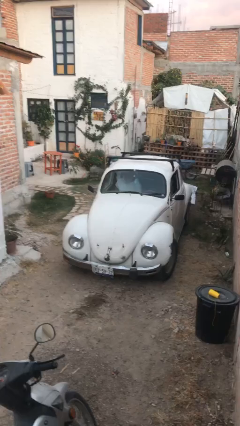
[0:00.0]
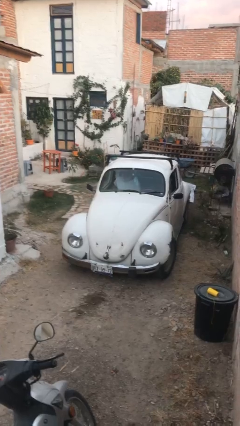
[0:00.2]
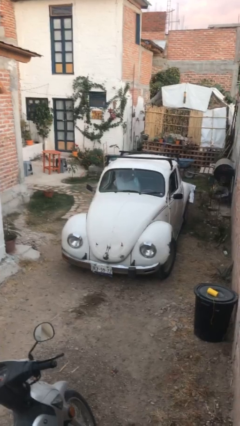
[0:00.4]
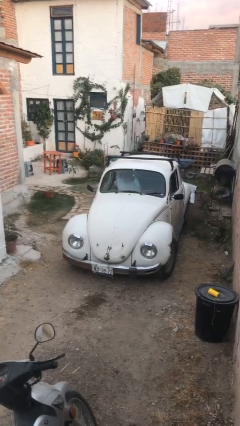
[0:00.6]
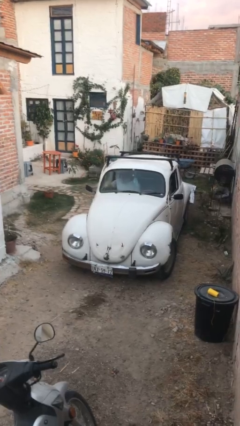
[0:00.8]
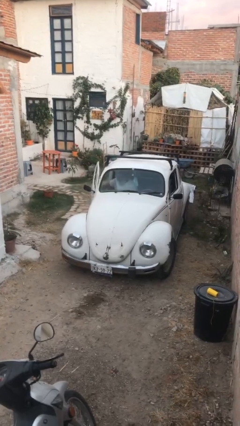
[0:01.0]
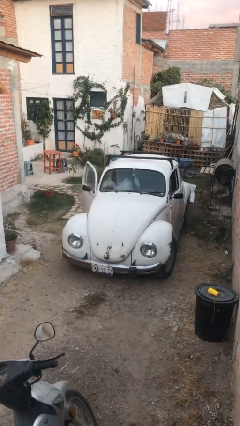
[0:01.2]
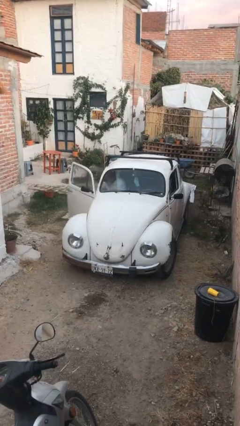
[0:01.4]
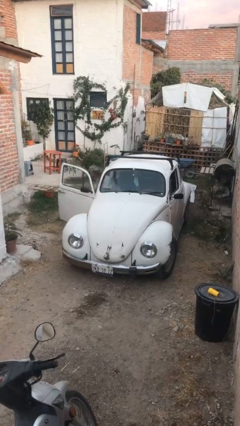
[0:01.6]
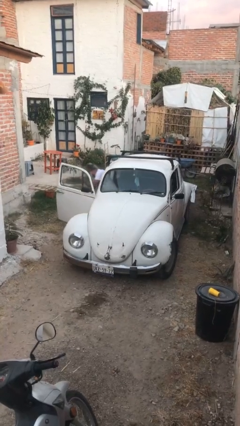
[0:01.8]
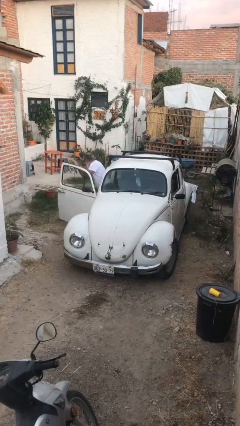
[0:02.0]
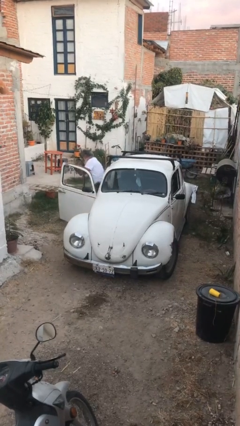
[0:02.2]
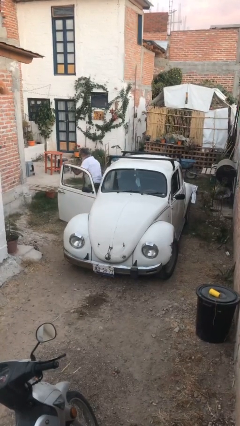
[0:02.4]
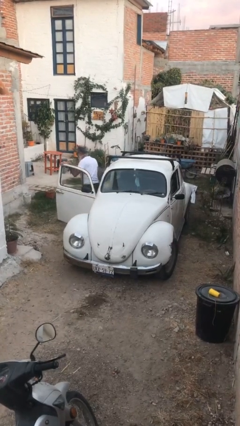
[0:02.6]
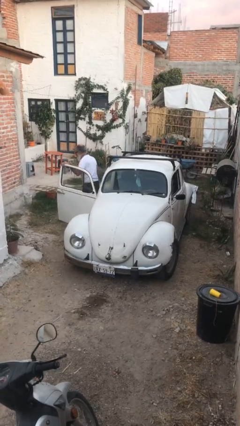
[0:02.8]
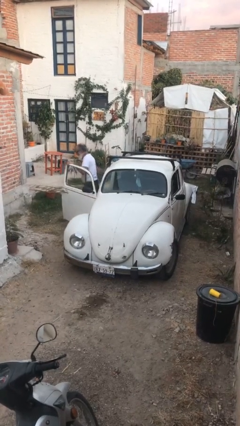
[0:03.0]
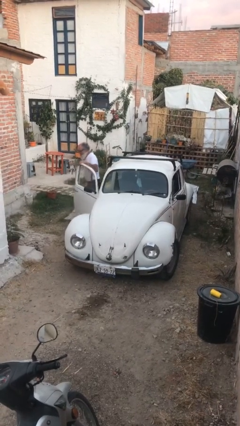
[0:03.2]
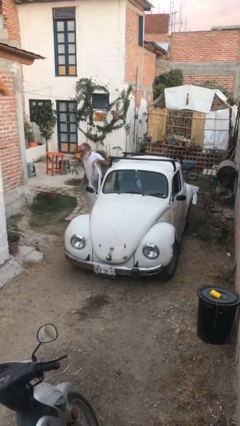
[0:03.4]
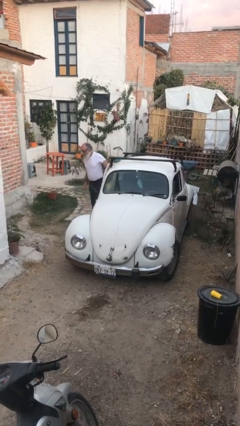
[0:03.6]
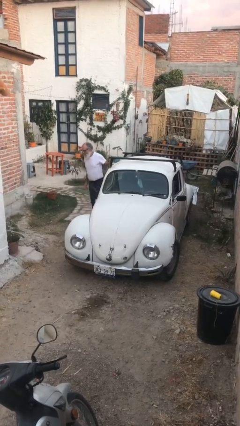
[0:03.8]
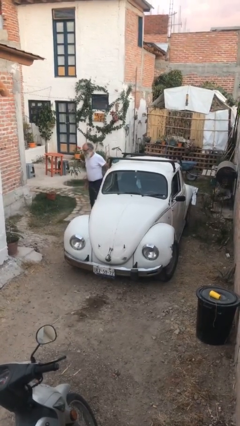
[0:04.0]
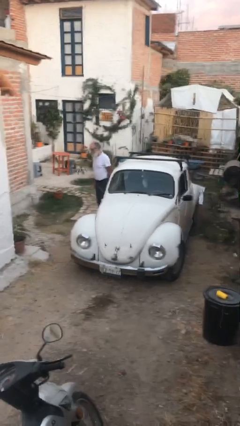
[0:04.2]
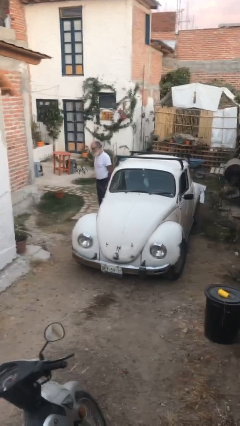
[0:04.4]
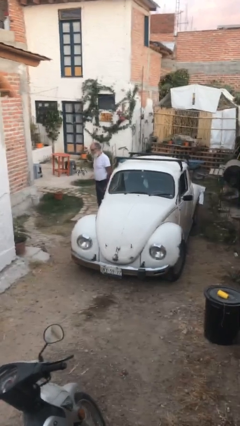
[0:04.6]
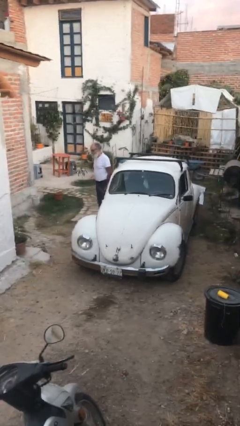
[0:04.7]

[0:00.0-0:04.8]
car drops off person

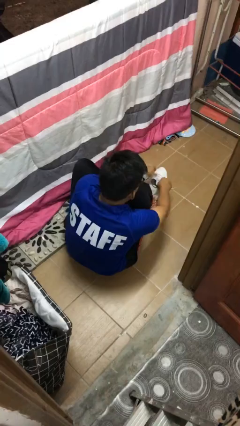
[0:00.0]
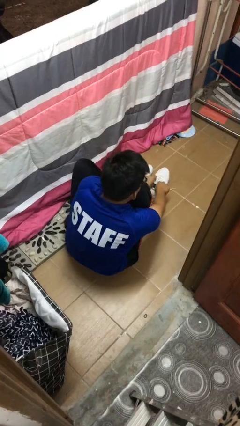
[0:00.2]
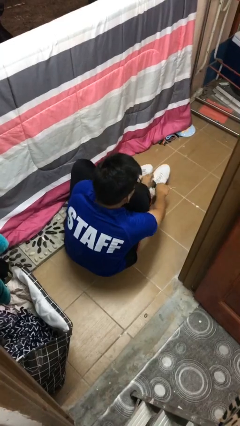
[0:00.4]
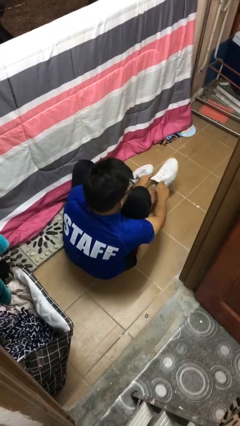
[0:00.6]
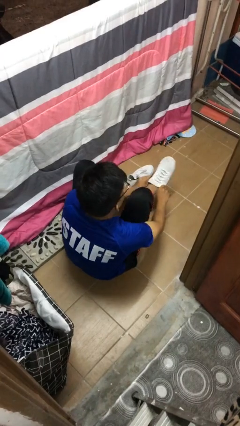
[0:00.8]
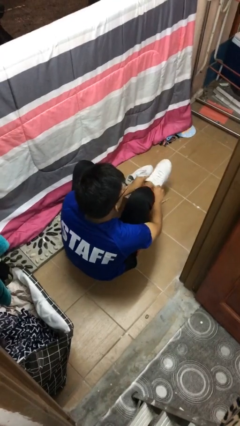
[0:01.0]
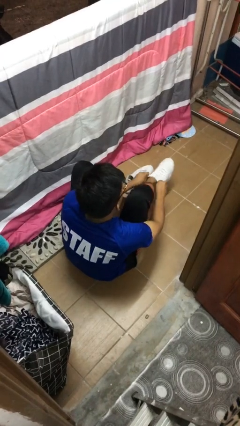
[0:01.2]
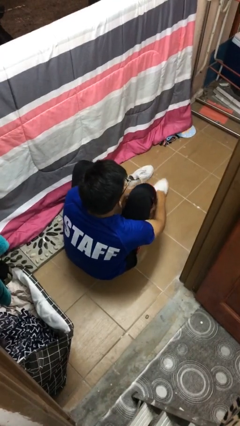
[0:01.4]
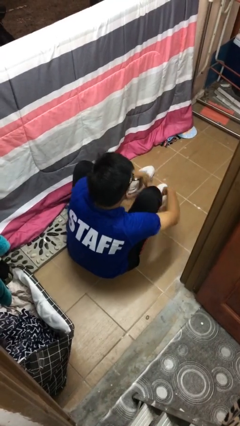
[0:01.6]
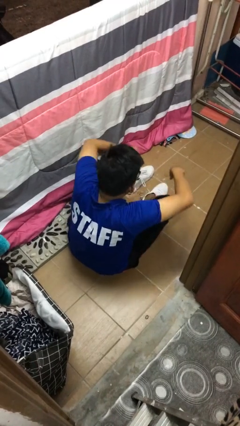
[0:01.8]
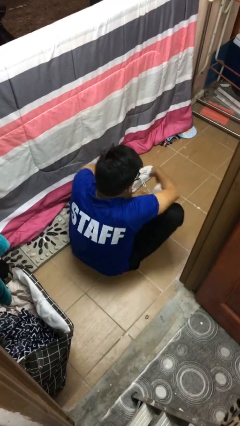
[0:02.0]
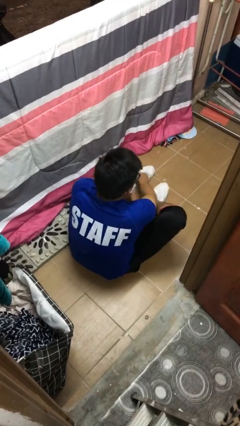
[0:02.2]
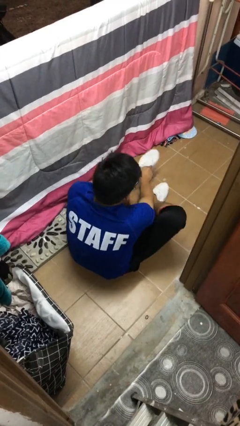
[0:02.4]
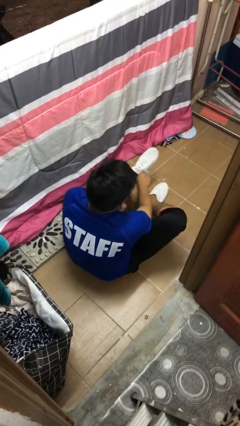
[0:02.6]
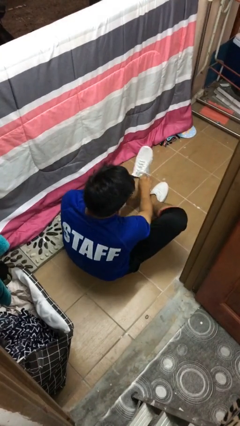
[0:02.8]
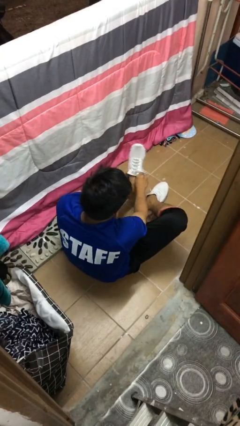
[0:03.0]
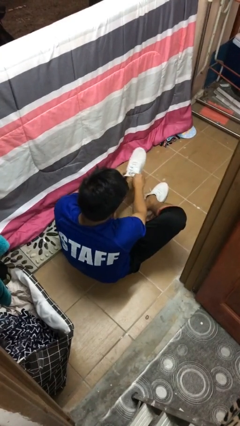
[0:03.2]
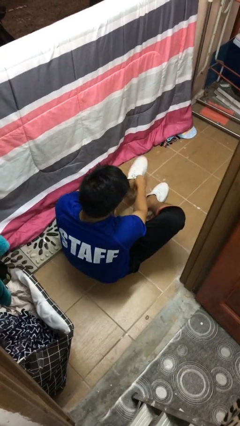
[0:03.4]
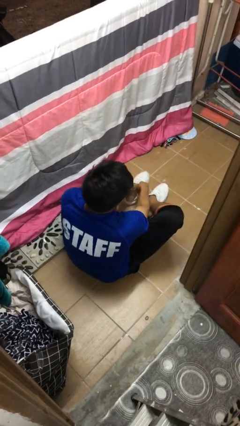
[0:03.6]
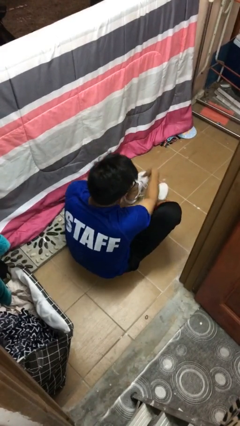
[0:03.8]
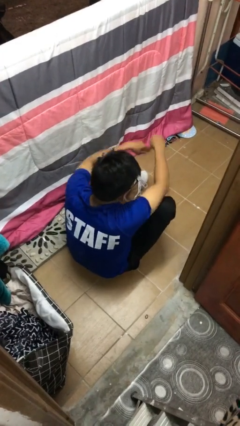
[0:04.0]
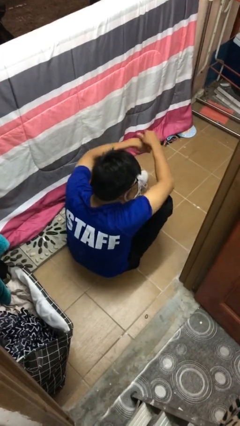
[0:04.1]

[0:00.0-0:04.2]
person puts on shoes

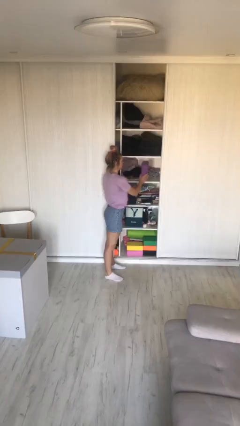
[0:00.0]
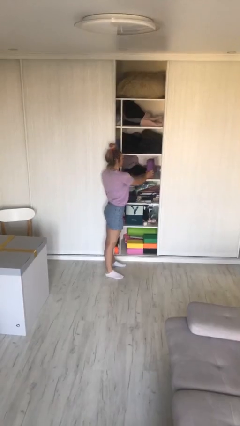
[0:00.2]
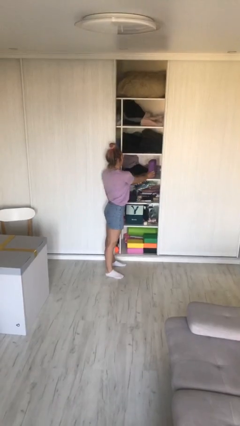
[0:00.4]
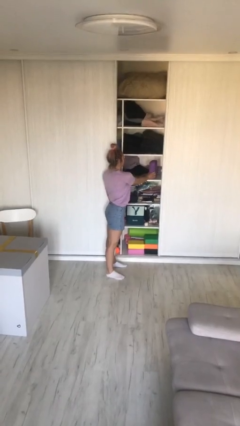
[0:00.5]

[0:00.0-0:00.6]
person puts down object into cabinet

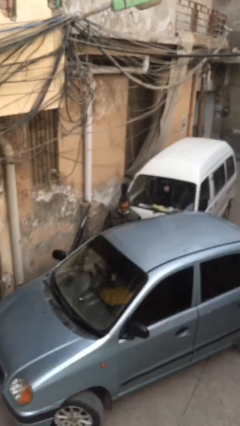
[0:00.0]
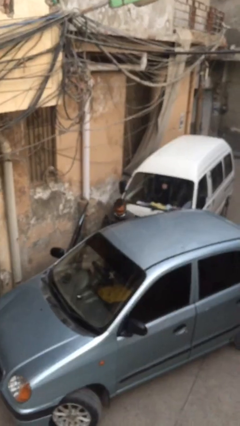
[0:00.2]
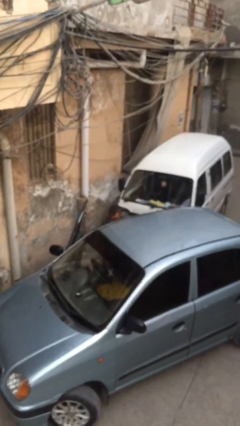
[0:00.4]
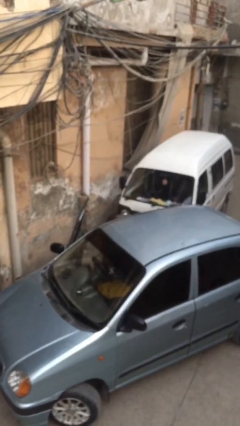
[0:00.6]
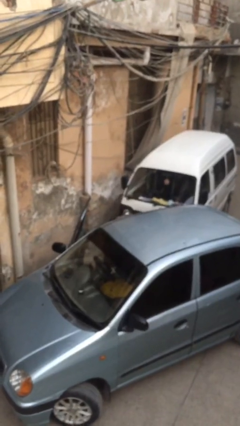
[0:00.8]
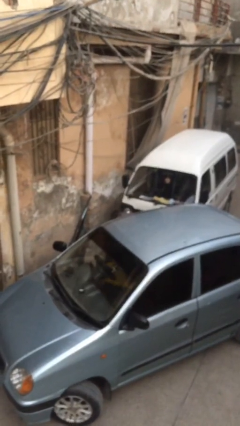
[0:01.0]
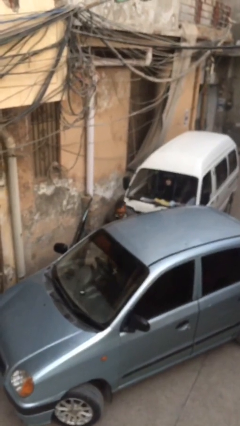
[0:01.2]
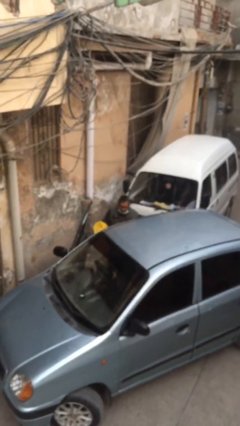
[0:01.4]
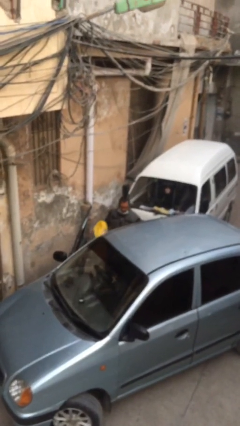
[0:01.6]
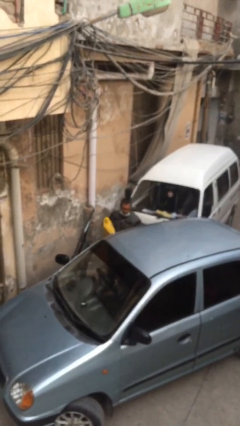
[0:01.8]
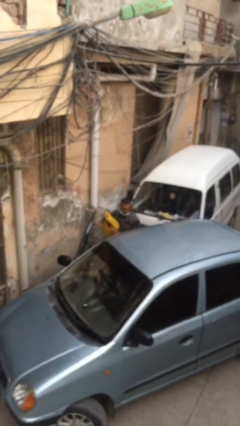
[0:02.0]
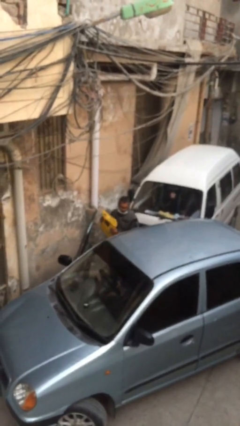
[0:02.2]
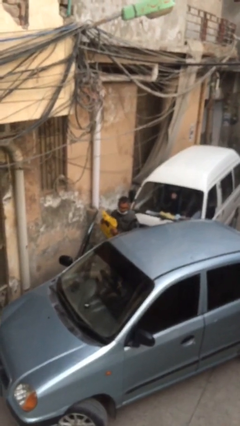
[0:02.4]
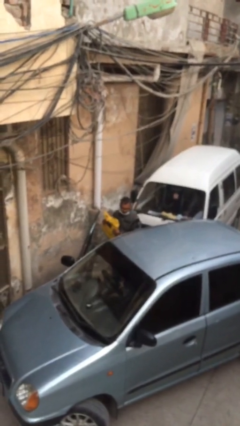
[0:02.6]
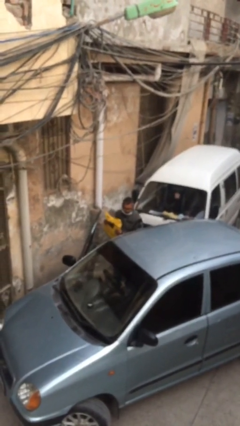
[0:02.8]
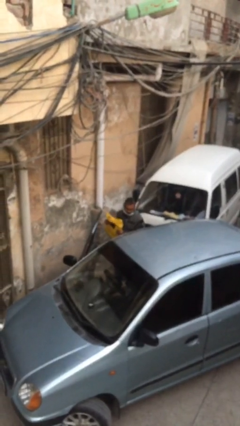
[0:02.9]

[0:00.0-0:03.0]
person unloads car

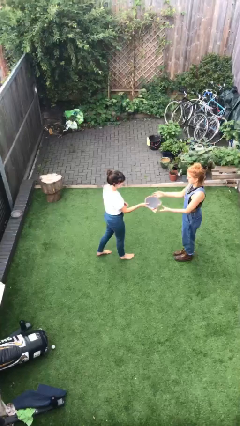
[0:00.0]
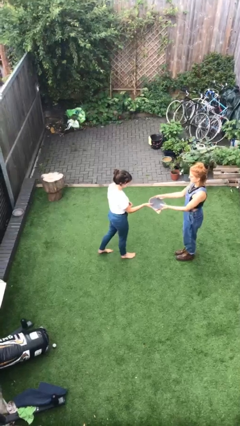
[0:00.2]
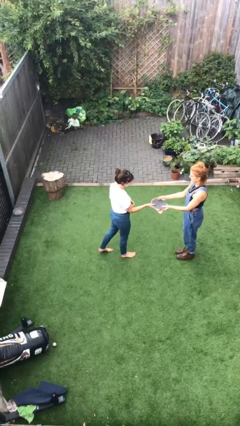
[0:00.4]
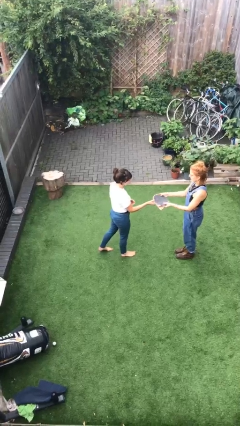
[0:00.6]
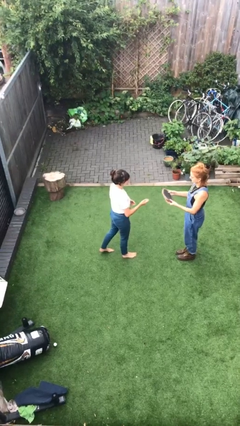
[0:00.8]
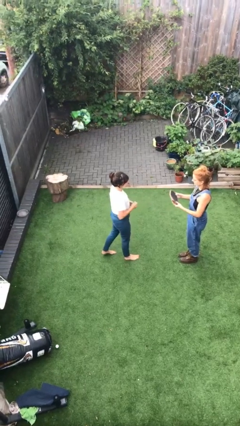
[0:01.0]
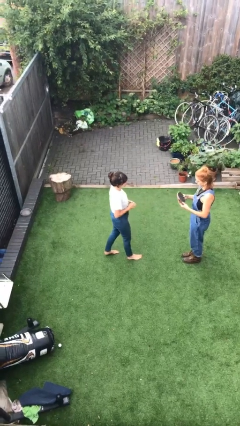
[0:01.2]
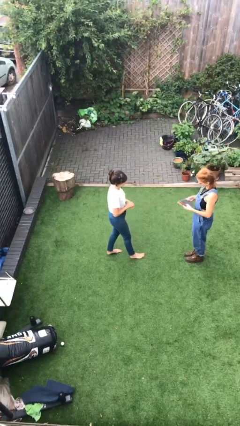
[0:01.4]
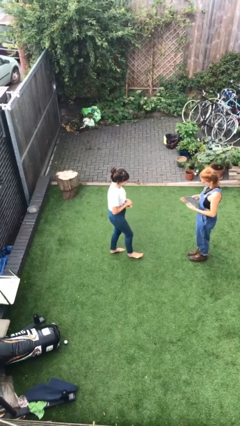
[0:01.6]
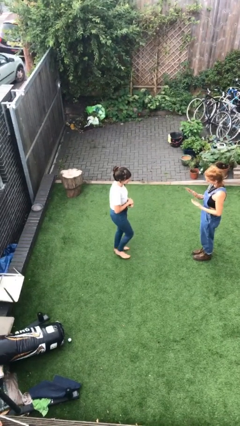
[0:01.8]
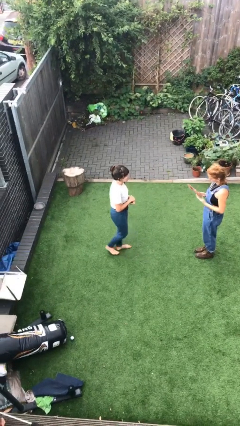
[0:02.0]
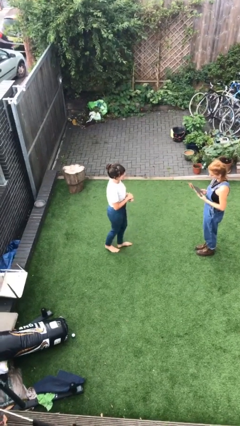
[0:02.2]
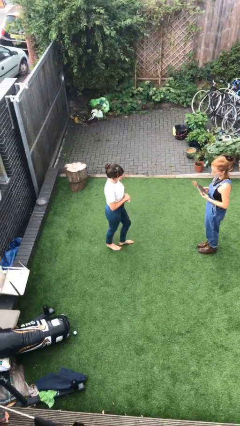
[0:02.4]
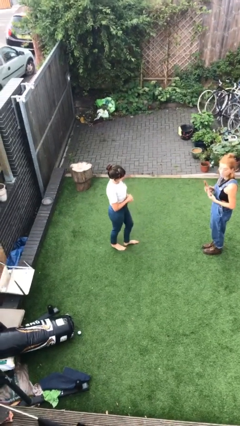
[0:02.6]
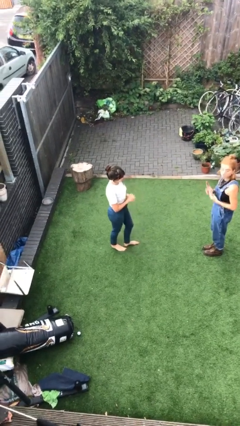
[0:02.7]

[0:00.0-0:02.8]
person transfers object to person

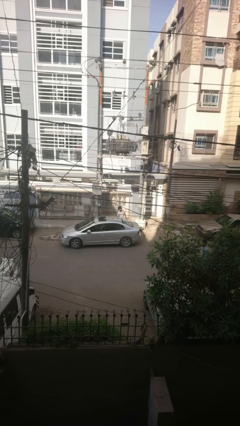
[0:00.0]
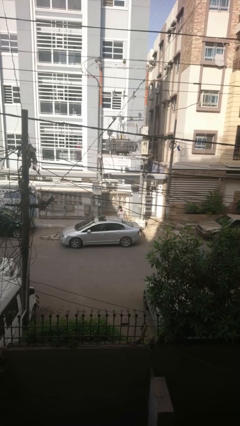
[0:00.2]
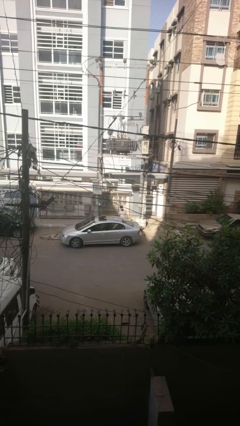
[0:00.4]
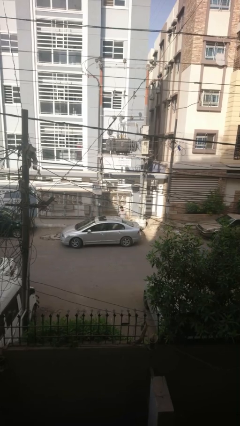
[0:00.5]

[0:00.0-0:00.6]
person enters car

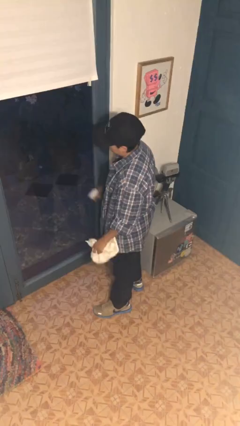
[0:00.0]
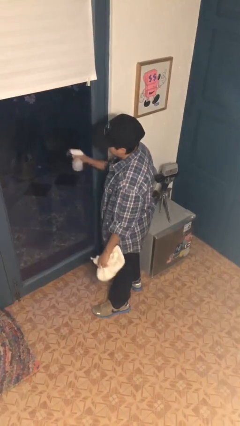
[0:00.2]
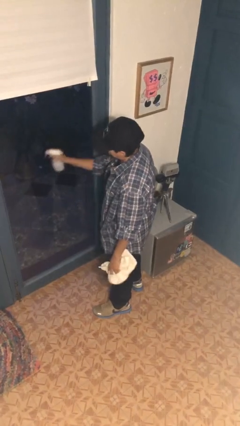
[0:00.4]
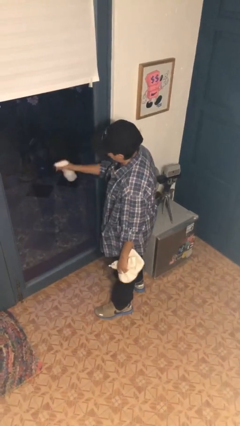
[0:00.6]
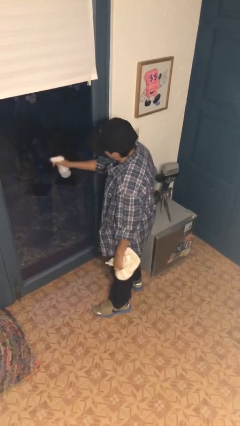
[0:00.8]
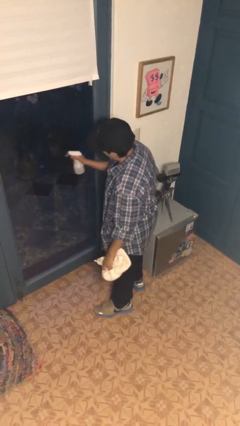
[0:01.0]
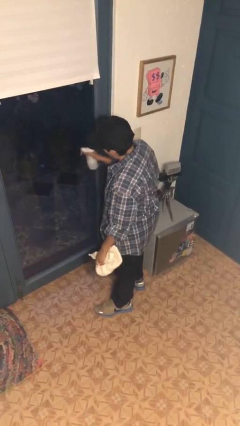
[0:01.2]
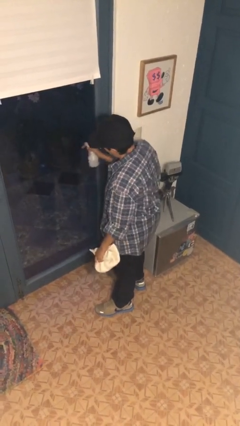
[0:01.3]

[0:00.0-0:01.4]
person sprays from bottle
